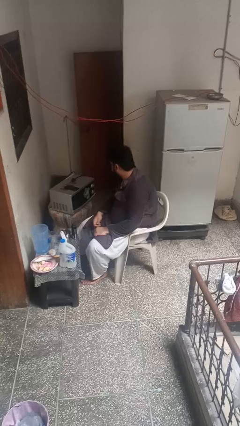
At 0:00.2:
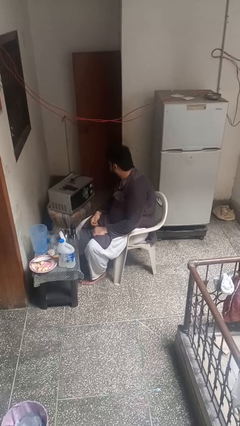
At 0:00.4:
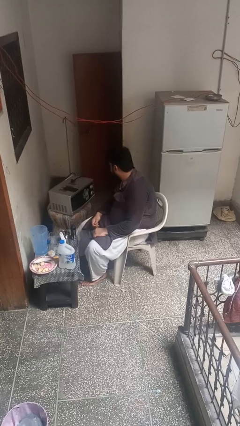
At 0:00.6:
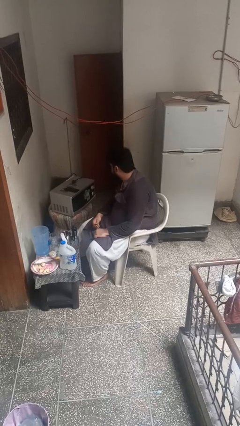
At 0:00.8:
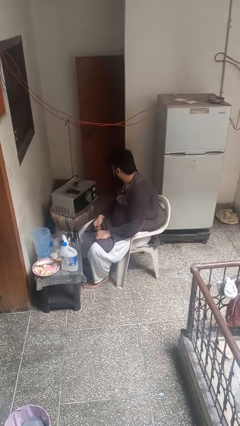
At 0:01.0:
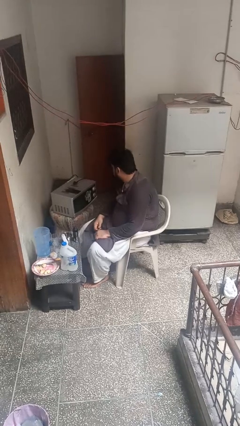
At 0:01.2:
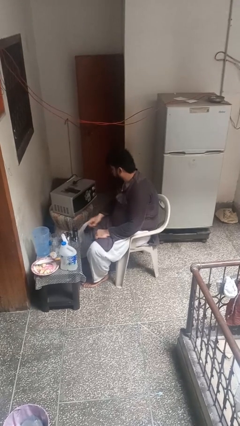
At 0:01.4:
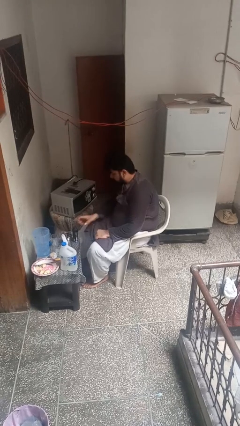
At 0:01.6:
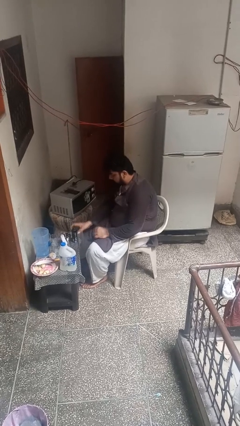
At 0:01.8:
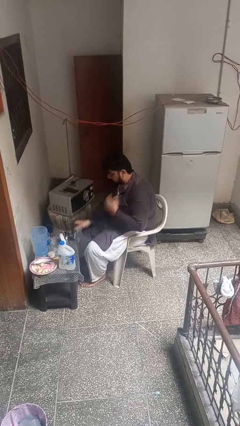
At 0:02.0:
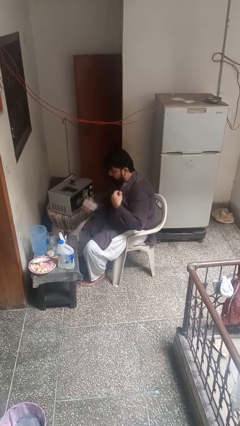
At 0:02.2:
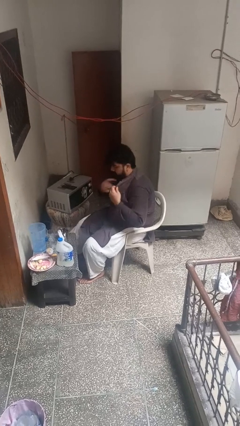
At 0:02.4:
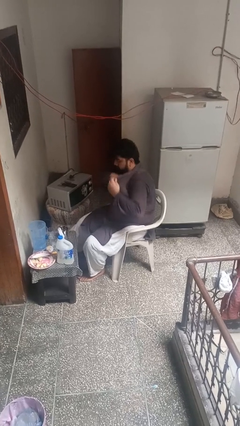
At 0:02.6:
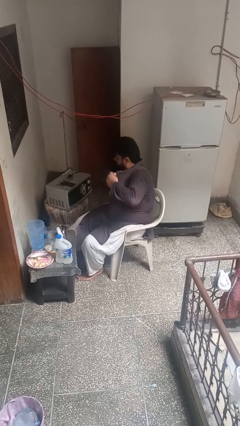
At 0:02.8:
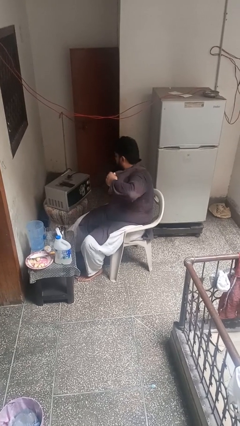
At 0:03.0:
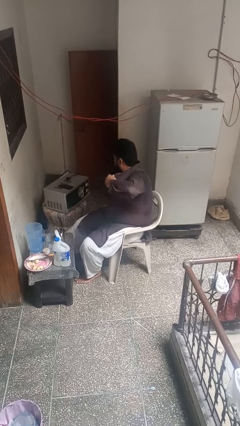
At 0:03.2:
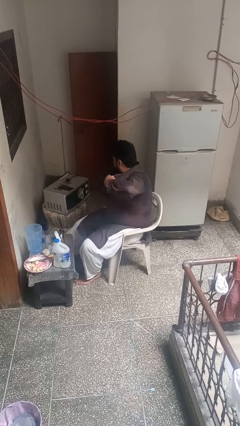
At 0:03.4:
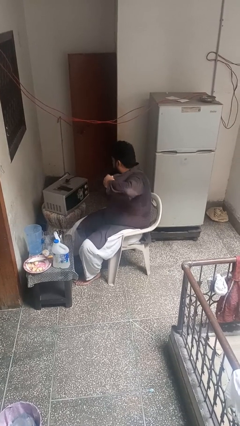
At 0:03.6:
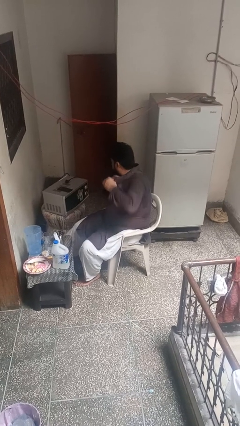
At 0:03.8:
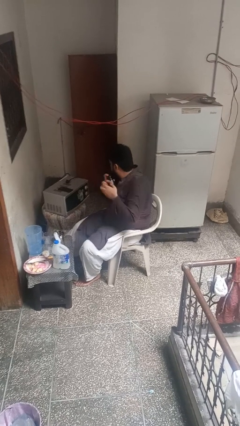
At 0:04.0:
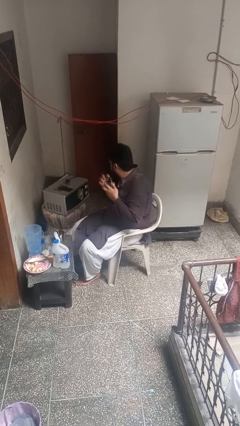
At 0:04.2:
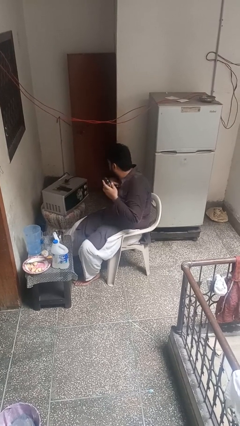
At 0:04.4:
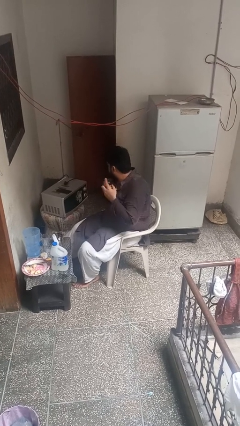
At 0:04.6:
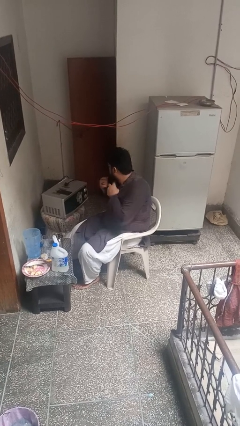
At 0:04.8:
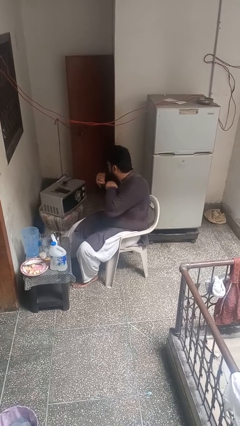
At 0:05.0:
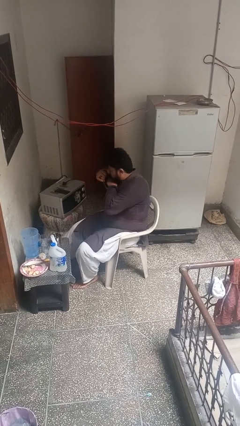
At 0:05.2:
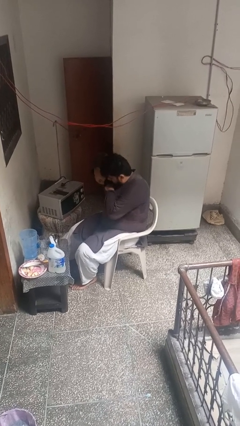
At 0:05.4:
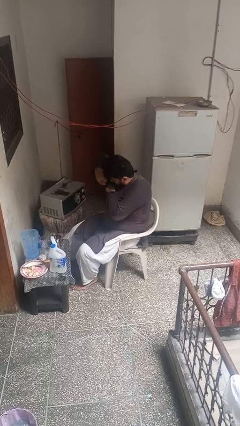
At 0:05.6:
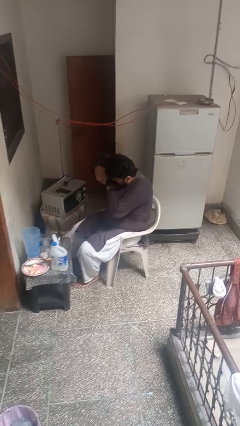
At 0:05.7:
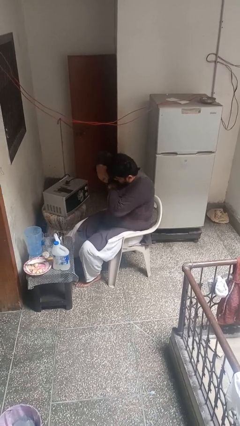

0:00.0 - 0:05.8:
person applies deodorant

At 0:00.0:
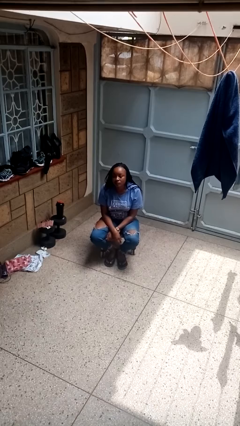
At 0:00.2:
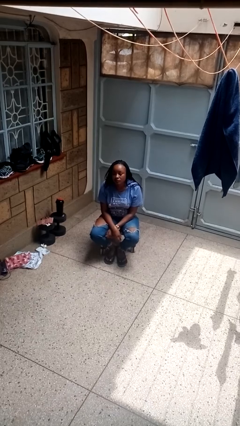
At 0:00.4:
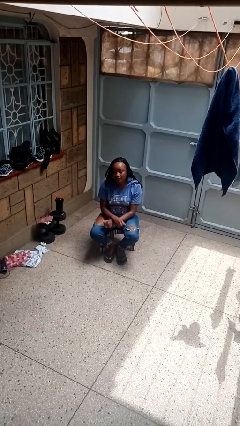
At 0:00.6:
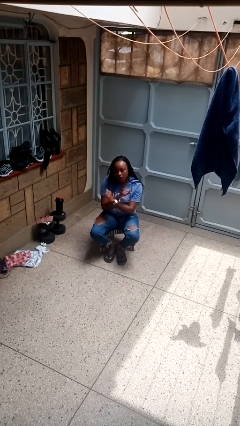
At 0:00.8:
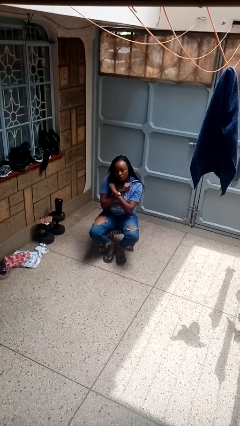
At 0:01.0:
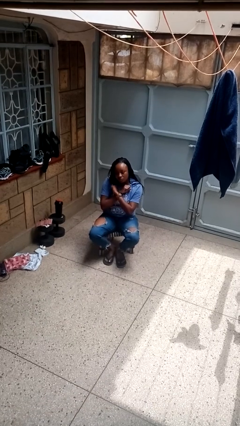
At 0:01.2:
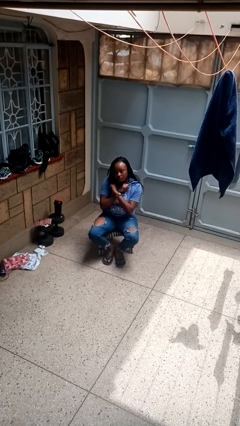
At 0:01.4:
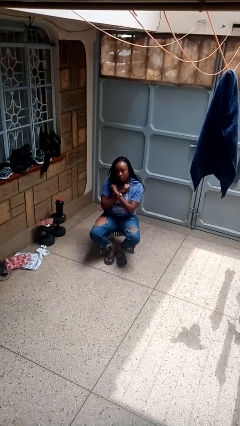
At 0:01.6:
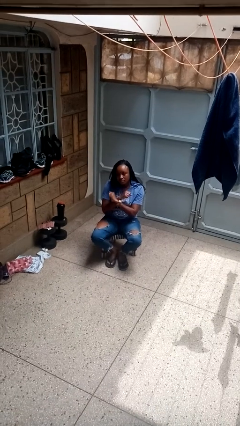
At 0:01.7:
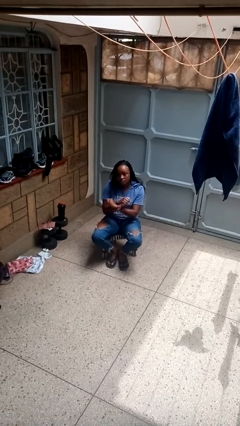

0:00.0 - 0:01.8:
person gestures arms x

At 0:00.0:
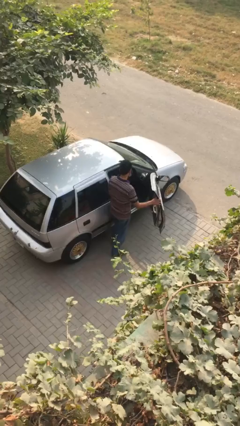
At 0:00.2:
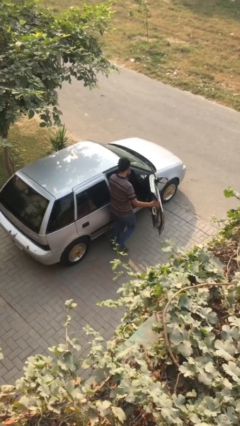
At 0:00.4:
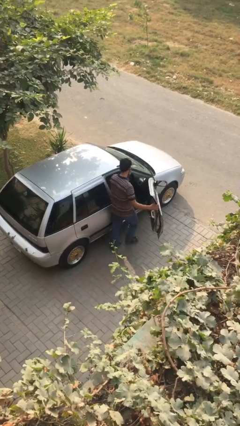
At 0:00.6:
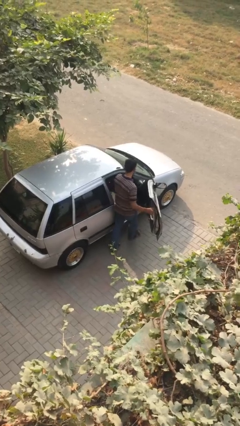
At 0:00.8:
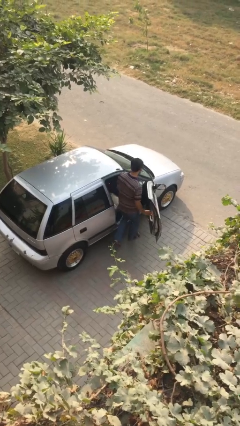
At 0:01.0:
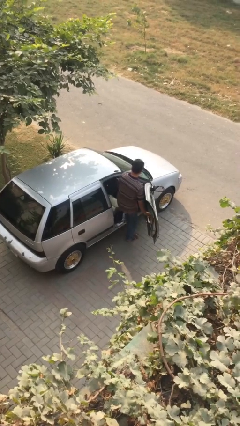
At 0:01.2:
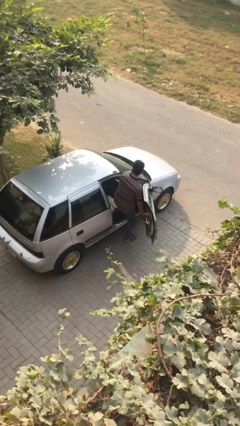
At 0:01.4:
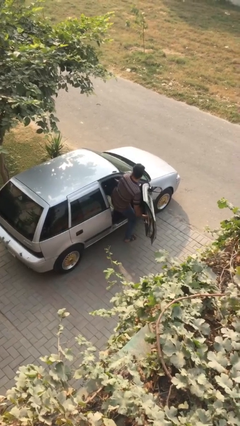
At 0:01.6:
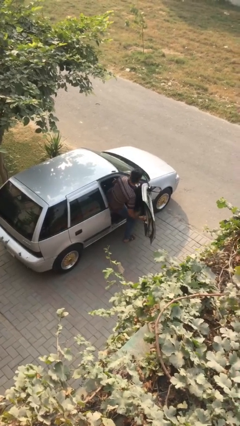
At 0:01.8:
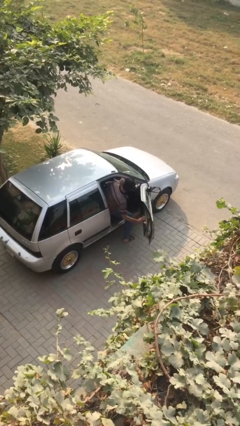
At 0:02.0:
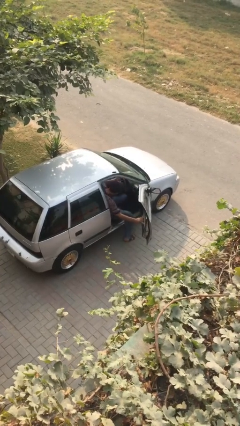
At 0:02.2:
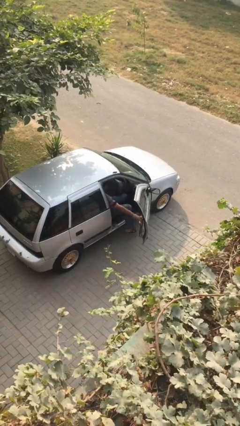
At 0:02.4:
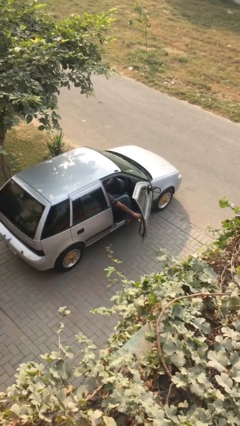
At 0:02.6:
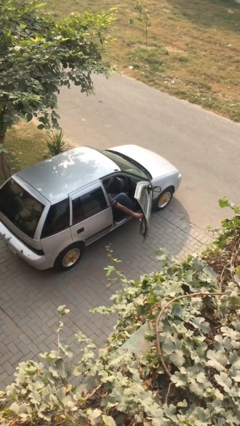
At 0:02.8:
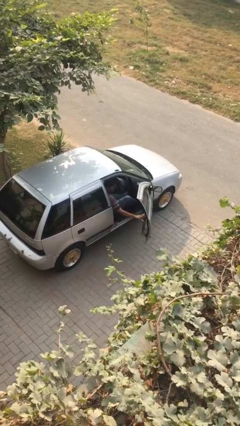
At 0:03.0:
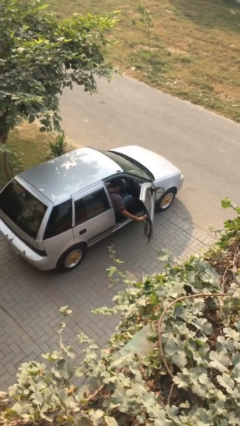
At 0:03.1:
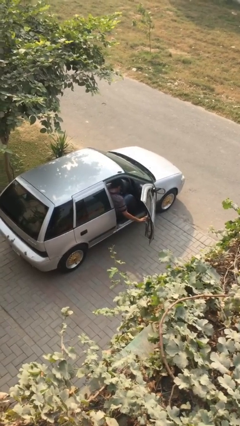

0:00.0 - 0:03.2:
person enters car

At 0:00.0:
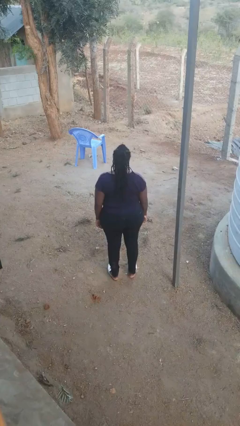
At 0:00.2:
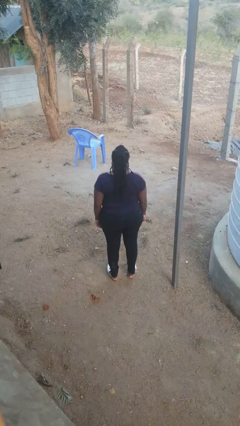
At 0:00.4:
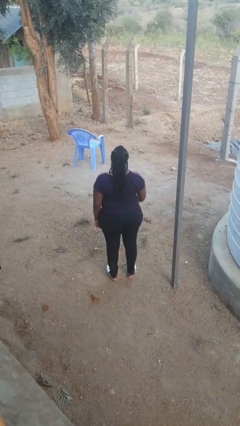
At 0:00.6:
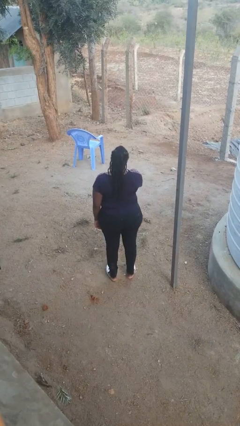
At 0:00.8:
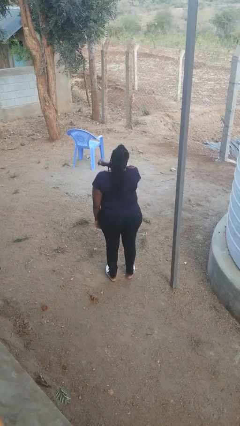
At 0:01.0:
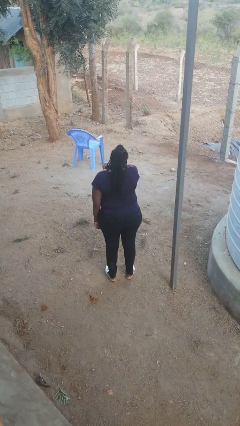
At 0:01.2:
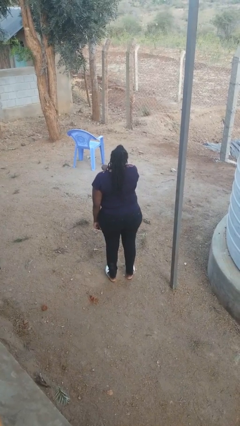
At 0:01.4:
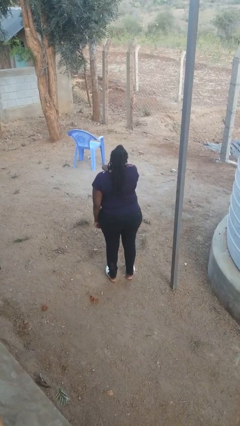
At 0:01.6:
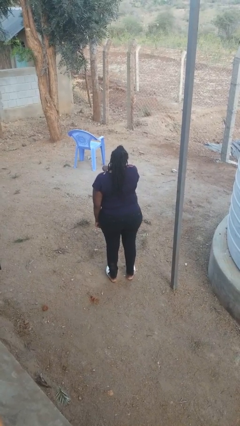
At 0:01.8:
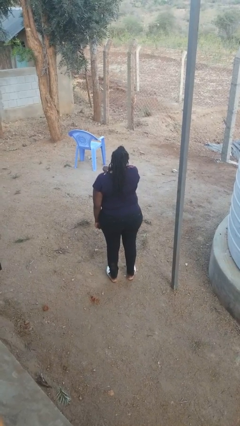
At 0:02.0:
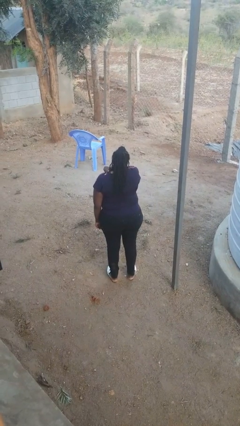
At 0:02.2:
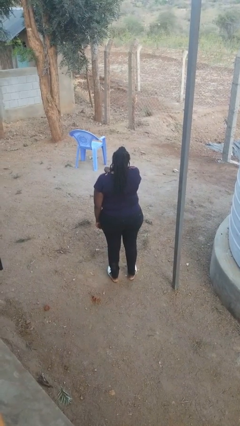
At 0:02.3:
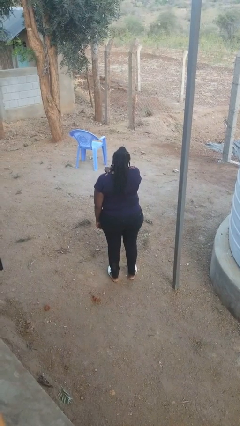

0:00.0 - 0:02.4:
person sneezes into arm

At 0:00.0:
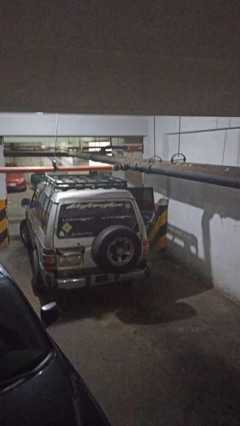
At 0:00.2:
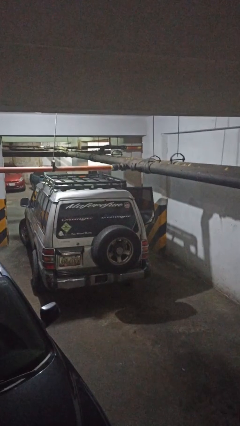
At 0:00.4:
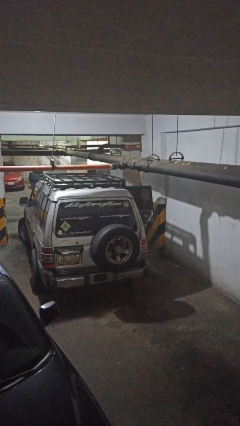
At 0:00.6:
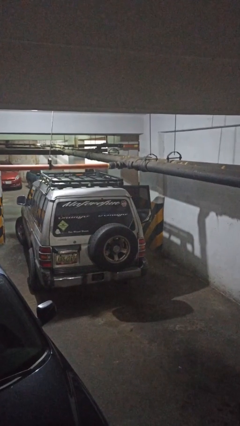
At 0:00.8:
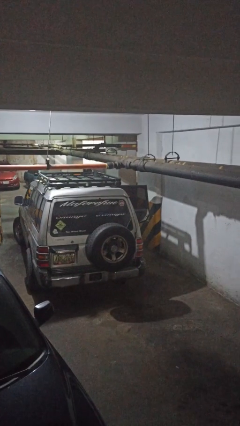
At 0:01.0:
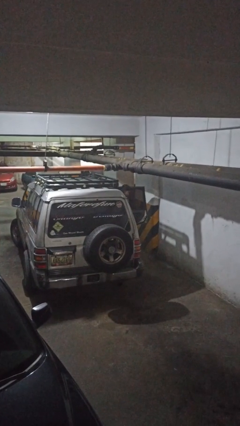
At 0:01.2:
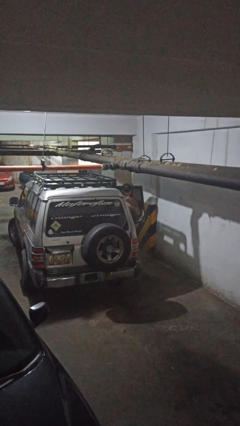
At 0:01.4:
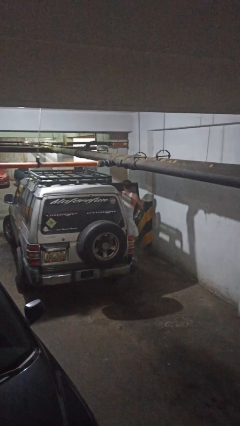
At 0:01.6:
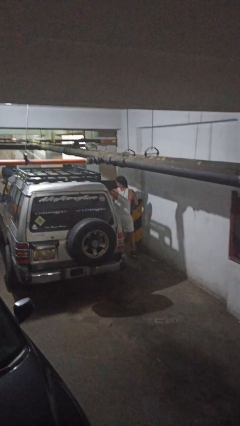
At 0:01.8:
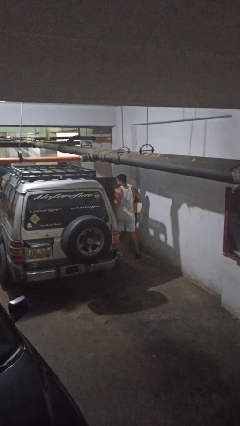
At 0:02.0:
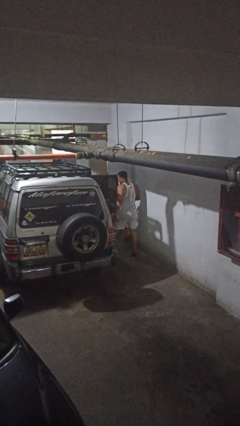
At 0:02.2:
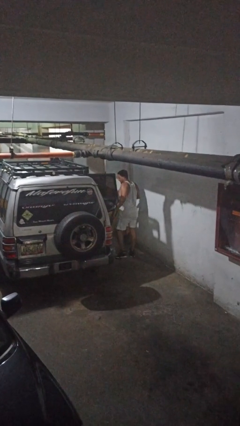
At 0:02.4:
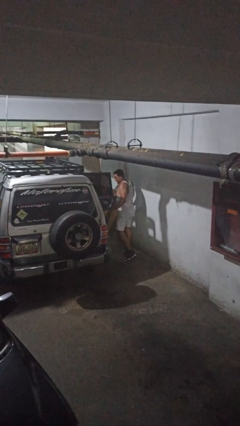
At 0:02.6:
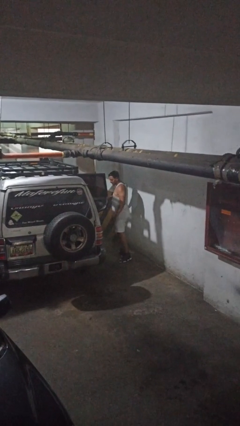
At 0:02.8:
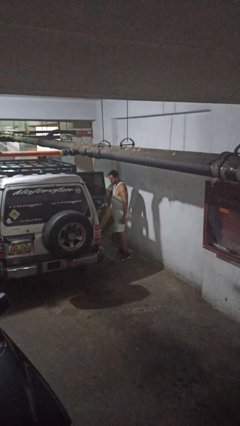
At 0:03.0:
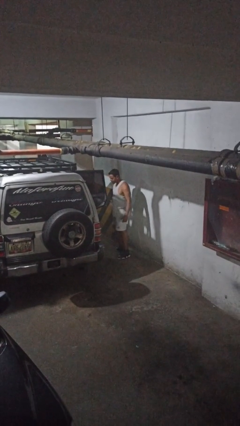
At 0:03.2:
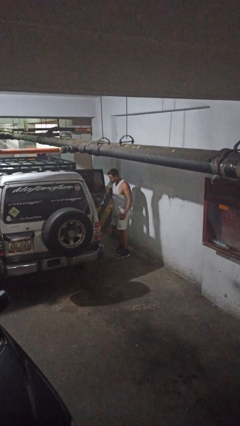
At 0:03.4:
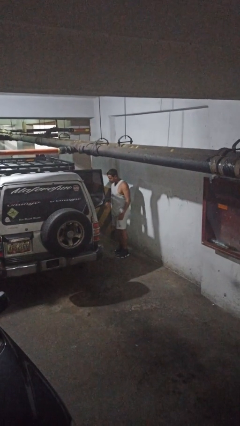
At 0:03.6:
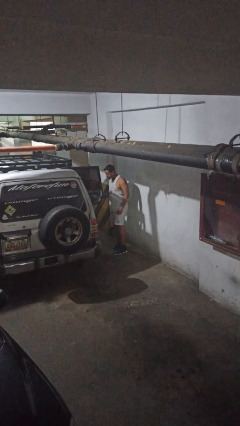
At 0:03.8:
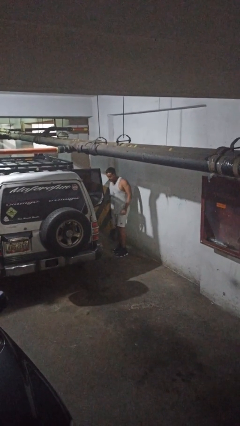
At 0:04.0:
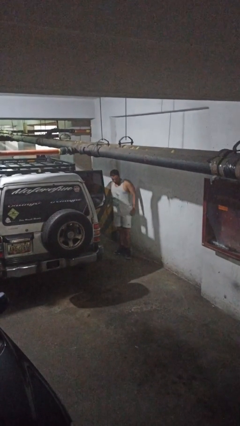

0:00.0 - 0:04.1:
person exits car

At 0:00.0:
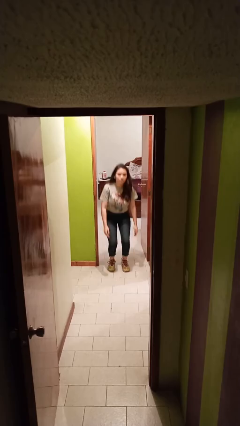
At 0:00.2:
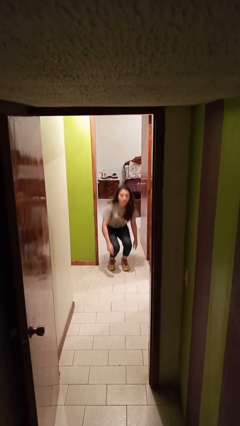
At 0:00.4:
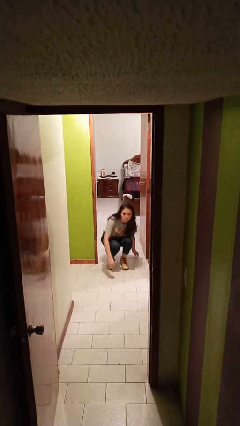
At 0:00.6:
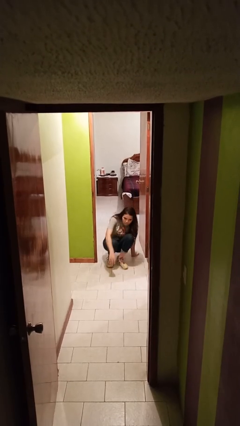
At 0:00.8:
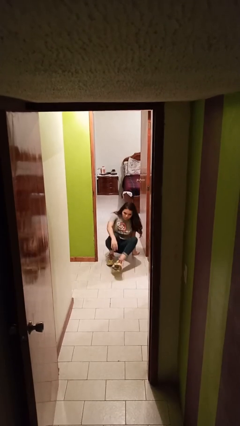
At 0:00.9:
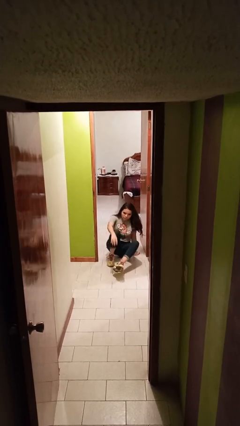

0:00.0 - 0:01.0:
person sits down
